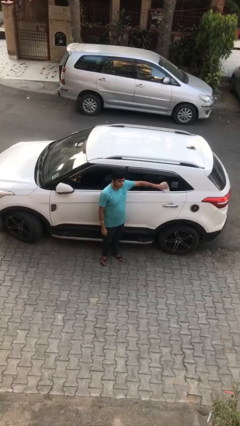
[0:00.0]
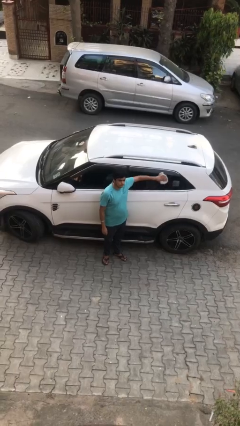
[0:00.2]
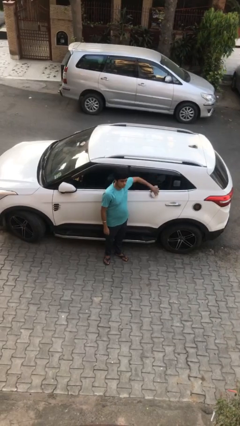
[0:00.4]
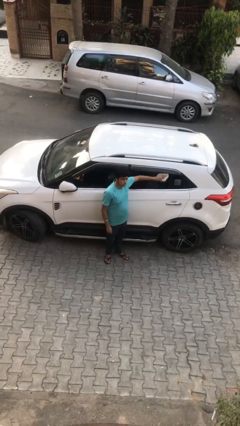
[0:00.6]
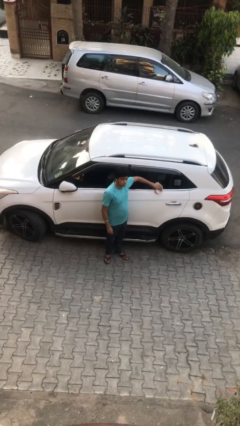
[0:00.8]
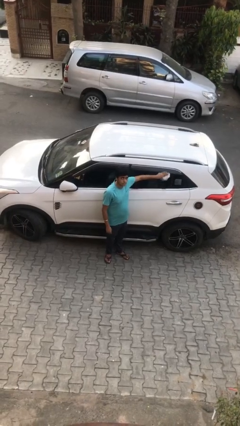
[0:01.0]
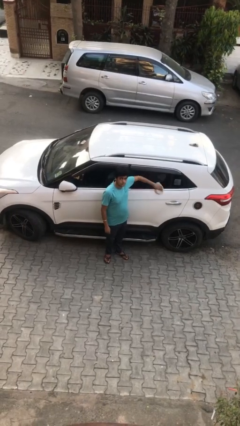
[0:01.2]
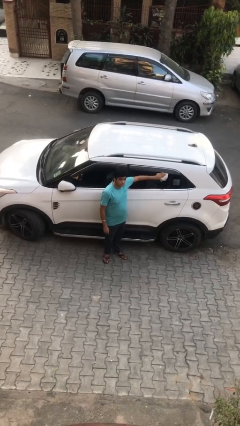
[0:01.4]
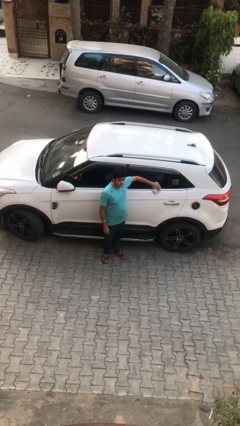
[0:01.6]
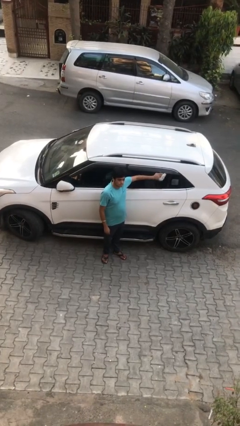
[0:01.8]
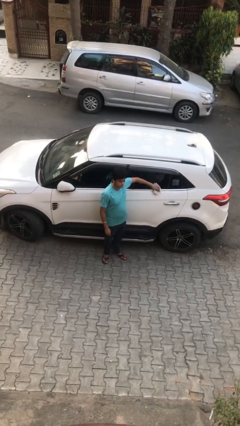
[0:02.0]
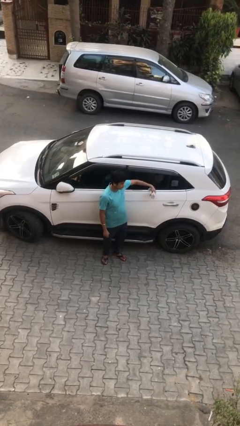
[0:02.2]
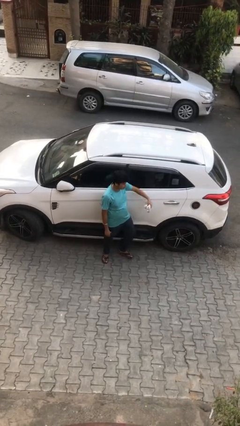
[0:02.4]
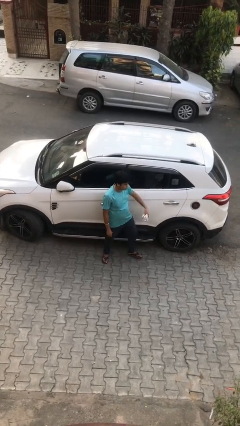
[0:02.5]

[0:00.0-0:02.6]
person polishes car with rag

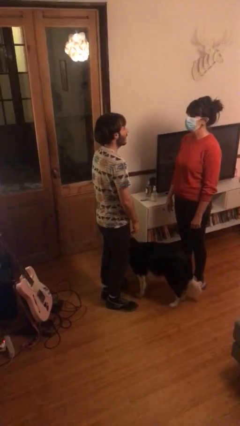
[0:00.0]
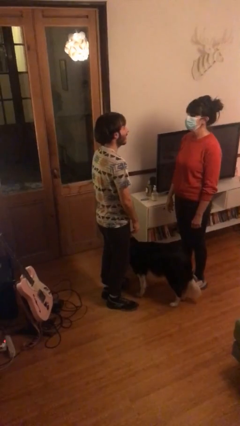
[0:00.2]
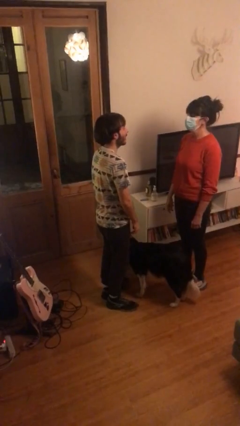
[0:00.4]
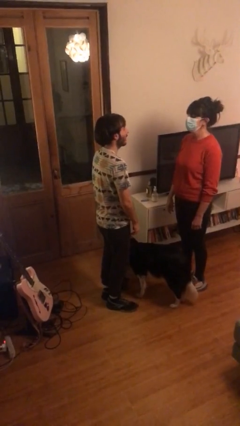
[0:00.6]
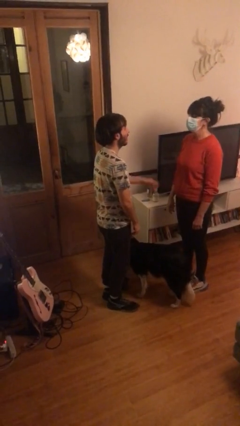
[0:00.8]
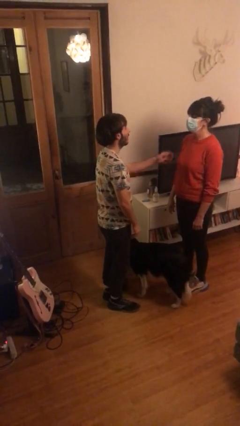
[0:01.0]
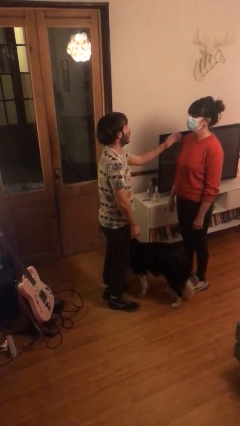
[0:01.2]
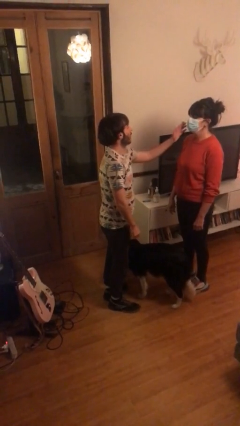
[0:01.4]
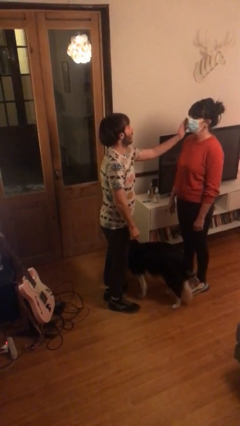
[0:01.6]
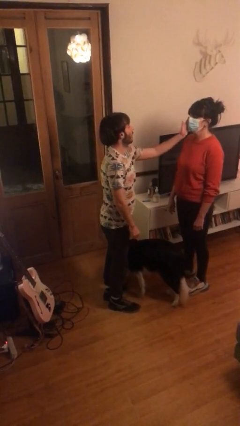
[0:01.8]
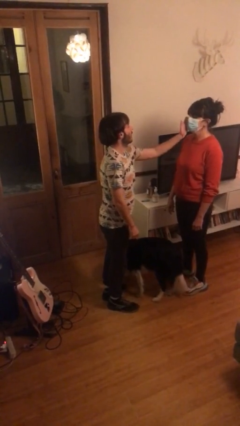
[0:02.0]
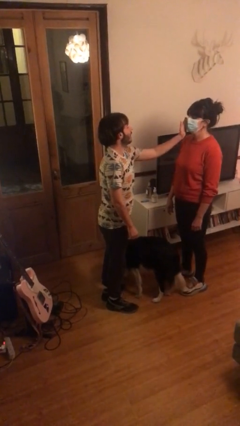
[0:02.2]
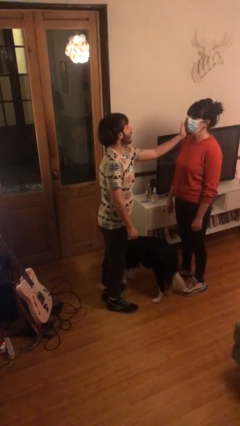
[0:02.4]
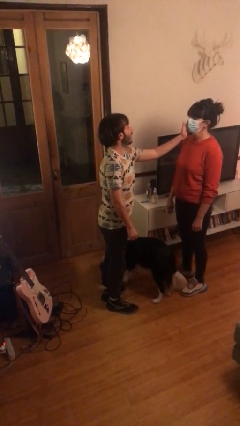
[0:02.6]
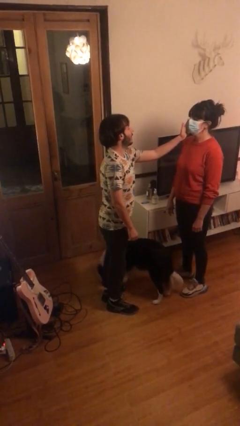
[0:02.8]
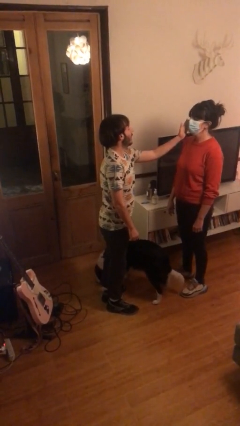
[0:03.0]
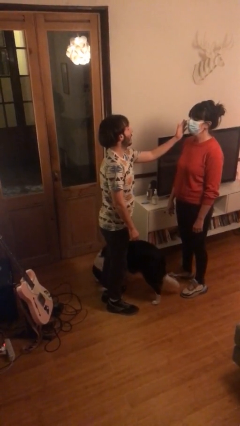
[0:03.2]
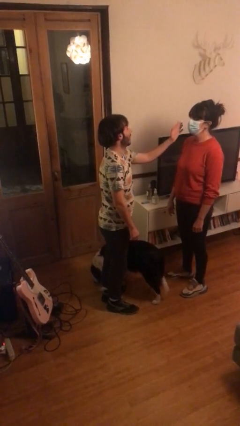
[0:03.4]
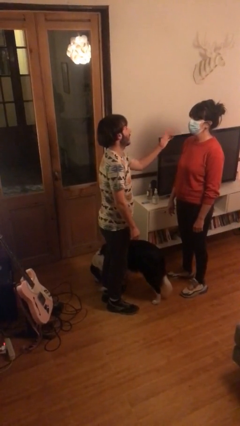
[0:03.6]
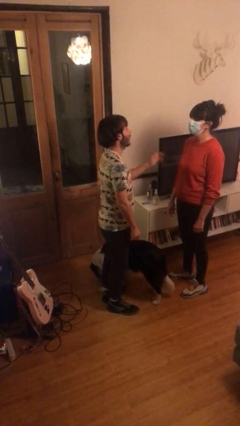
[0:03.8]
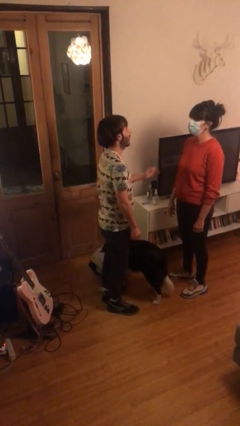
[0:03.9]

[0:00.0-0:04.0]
person touches face of person

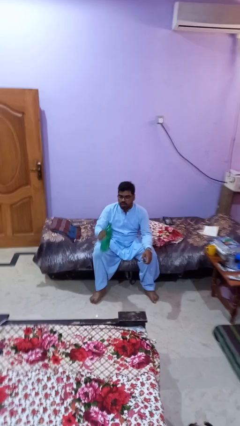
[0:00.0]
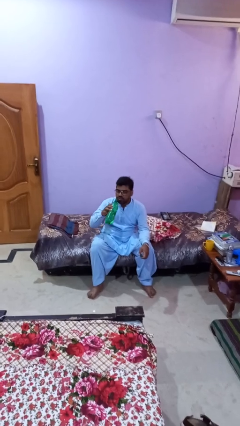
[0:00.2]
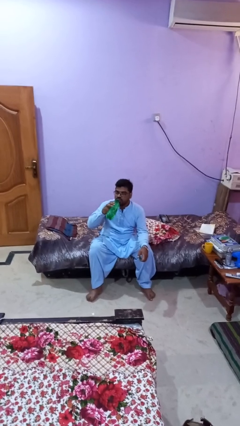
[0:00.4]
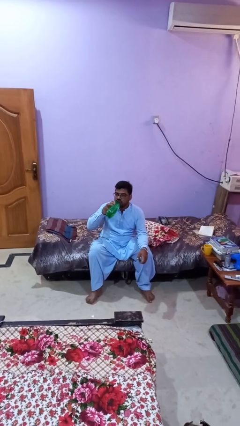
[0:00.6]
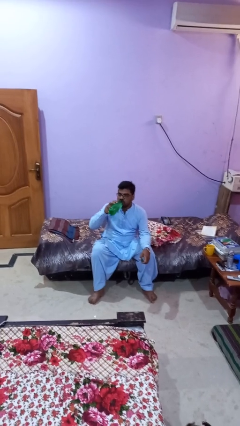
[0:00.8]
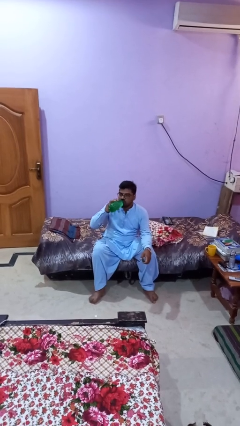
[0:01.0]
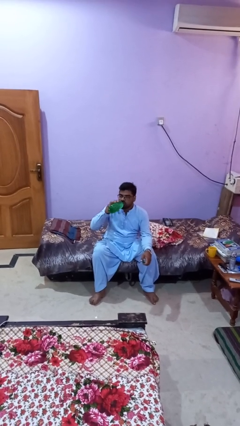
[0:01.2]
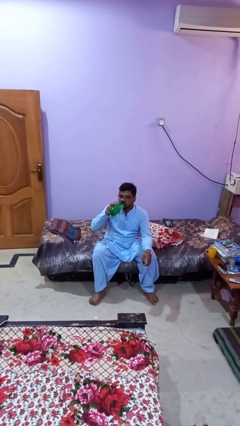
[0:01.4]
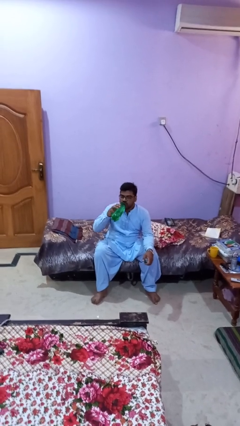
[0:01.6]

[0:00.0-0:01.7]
person drinks from bottle

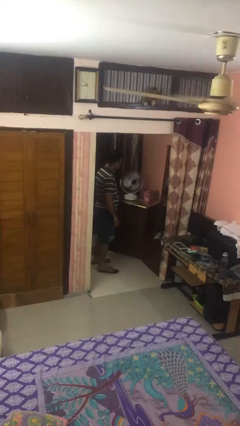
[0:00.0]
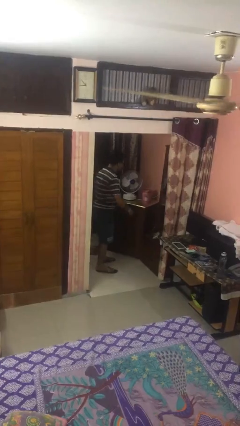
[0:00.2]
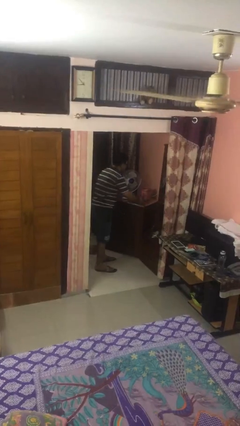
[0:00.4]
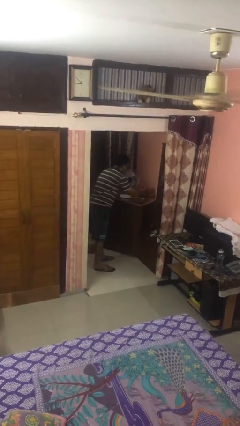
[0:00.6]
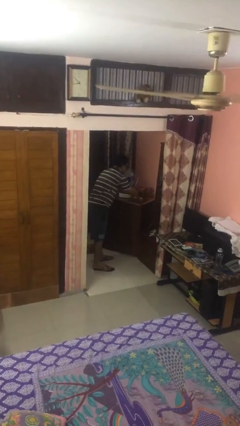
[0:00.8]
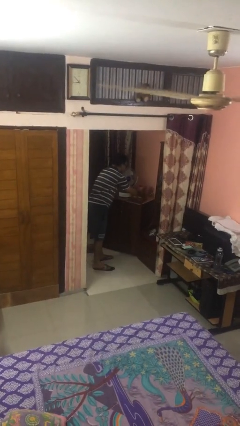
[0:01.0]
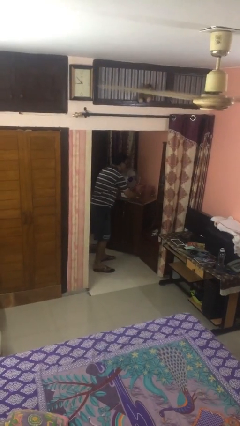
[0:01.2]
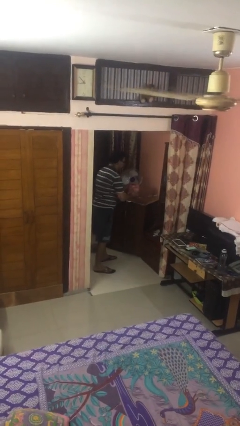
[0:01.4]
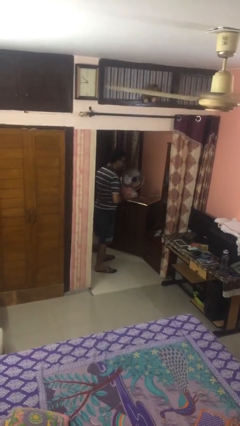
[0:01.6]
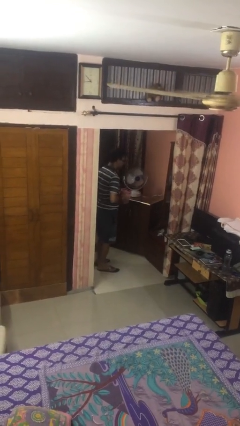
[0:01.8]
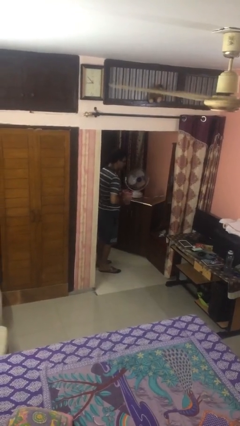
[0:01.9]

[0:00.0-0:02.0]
person picks up object from countertop

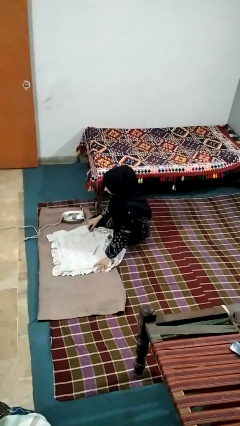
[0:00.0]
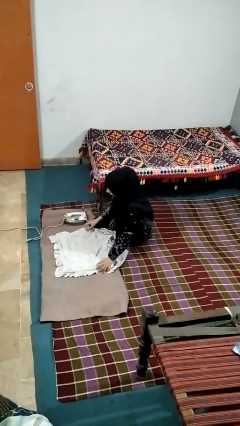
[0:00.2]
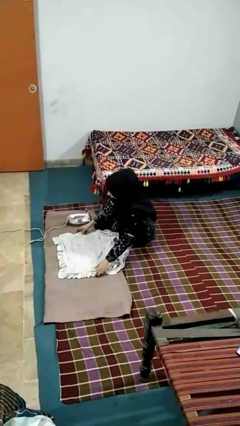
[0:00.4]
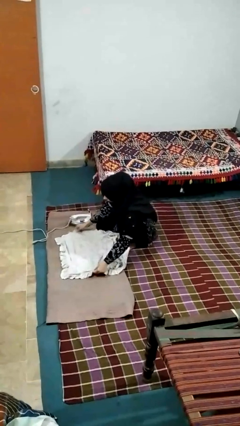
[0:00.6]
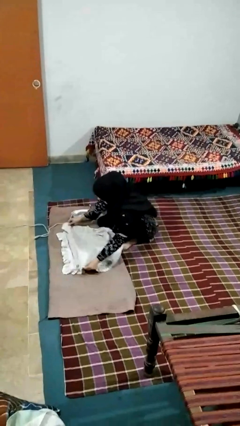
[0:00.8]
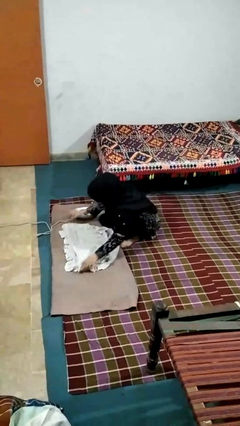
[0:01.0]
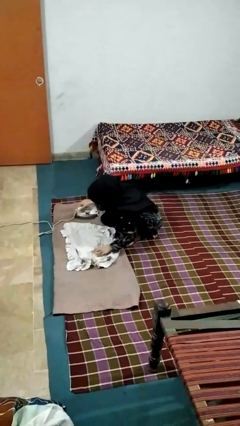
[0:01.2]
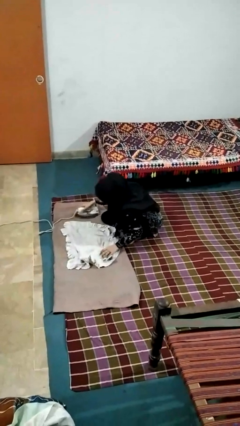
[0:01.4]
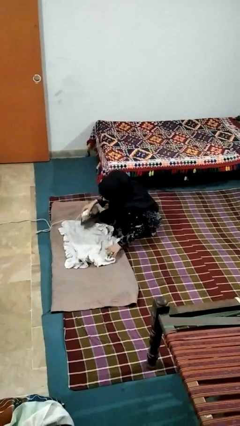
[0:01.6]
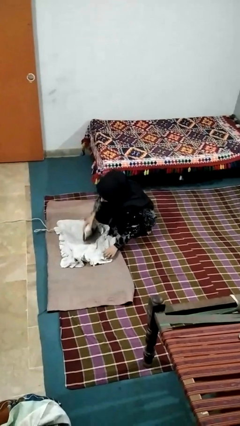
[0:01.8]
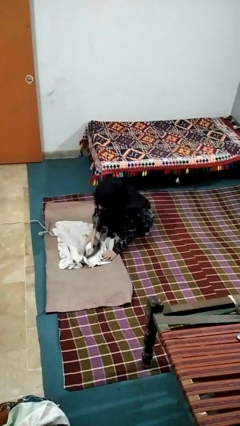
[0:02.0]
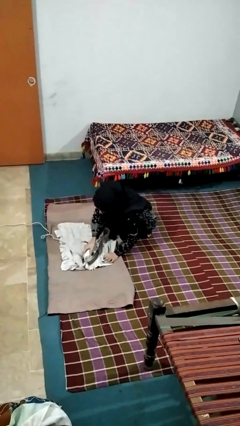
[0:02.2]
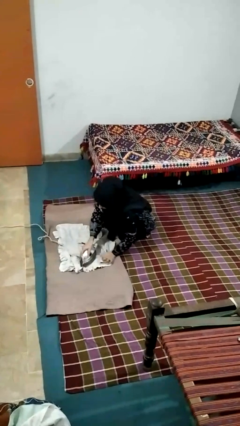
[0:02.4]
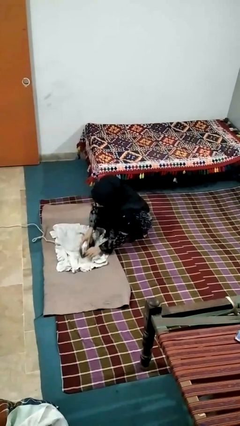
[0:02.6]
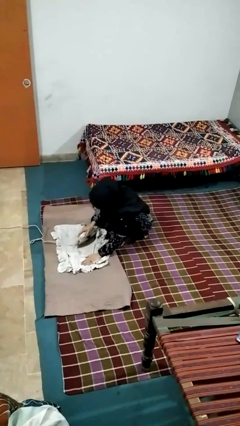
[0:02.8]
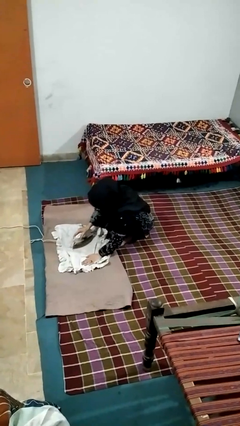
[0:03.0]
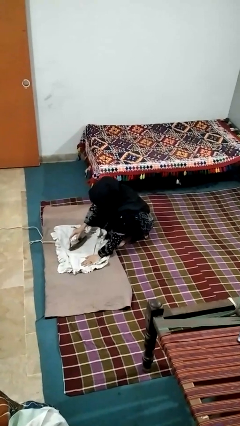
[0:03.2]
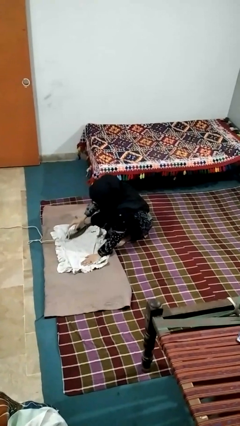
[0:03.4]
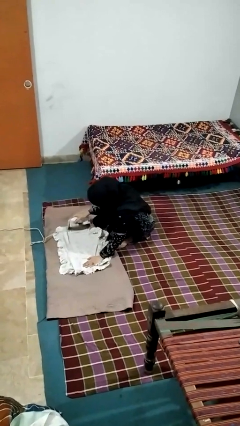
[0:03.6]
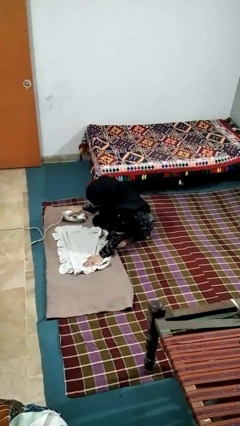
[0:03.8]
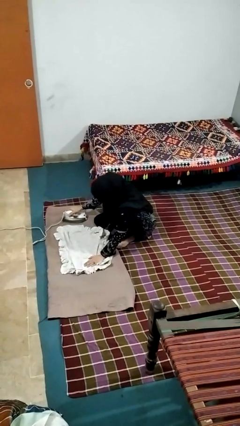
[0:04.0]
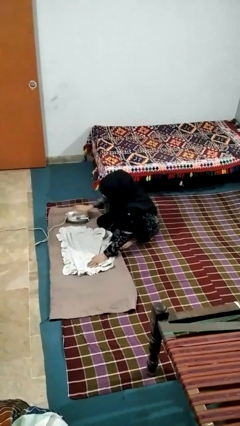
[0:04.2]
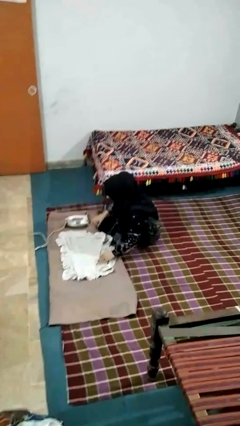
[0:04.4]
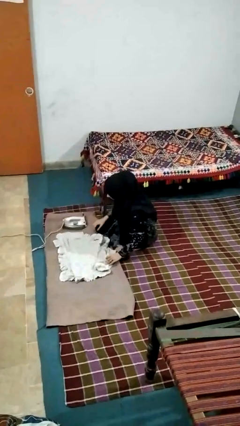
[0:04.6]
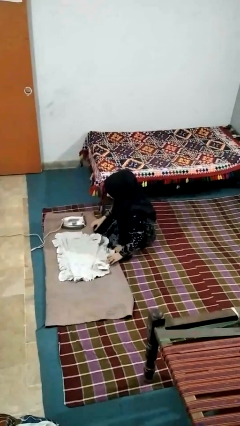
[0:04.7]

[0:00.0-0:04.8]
person irons clothes

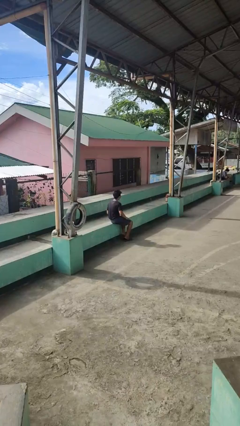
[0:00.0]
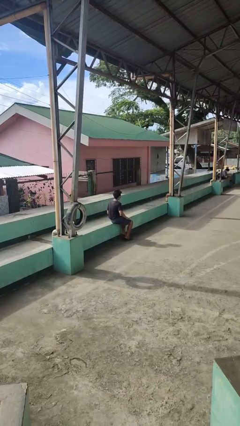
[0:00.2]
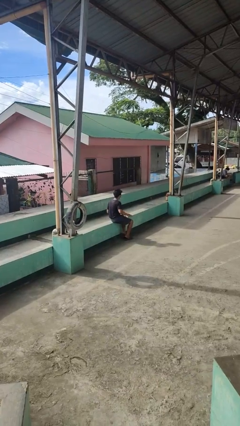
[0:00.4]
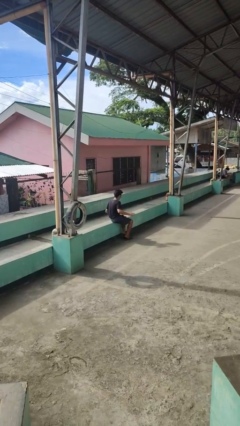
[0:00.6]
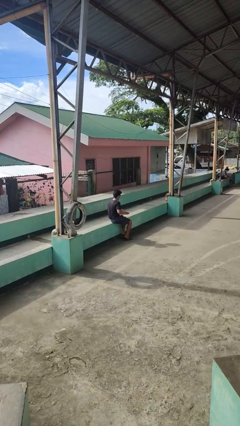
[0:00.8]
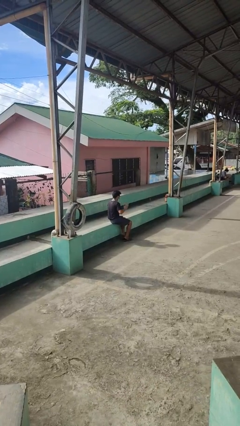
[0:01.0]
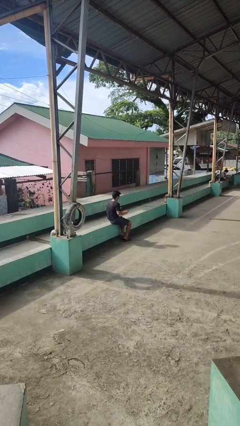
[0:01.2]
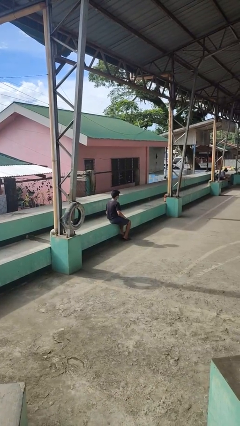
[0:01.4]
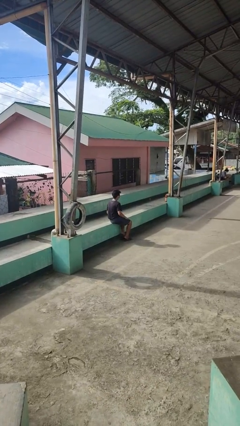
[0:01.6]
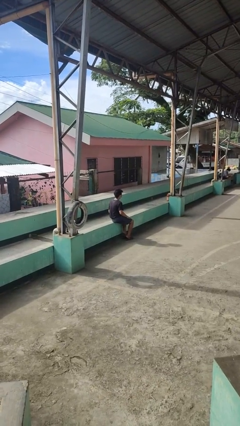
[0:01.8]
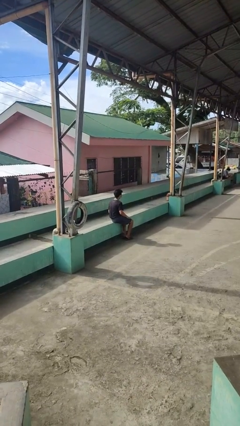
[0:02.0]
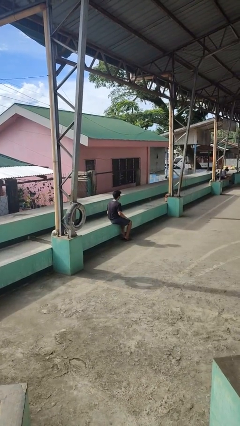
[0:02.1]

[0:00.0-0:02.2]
person slaps hands on thighs
